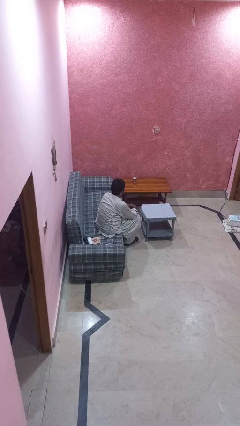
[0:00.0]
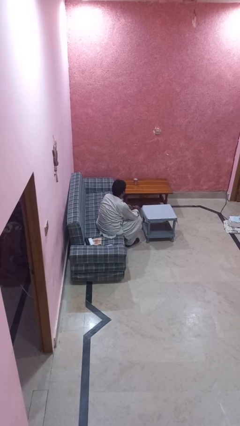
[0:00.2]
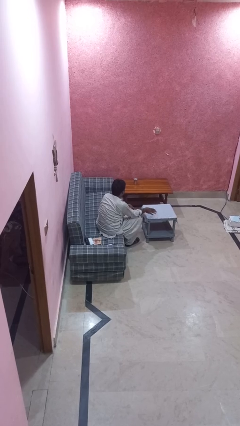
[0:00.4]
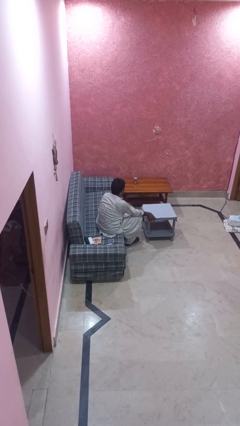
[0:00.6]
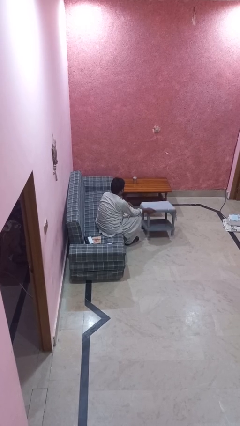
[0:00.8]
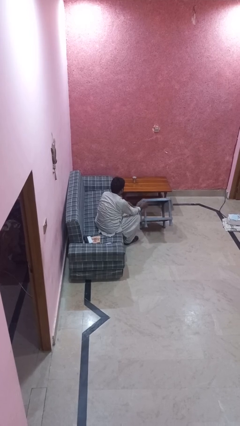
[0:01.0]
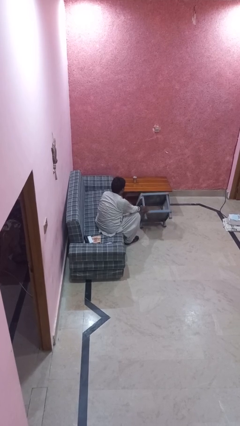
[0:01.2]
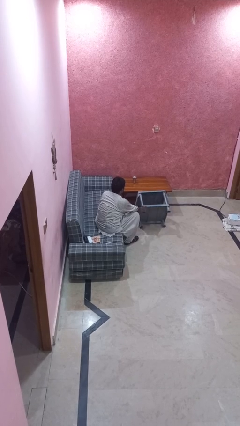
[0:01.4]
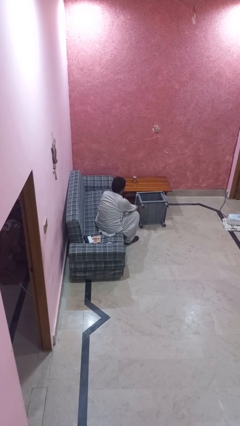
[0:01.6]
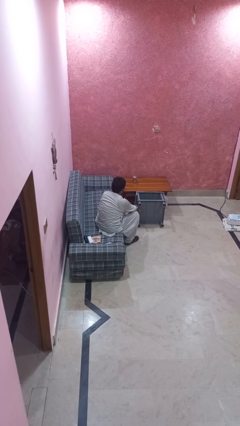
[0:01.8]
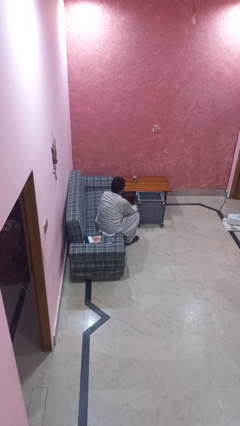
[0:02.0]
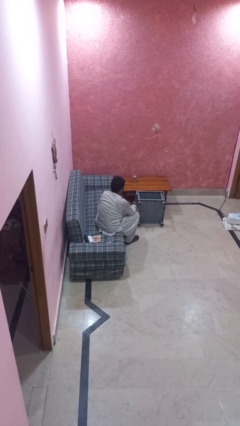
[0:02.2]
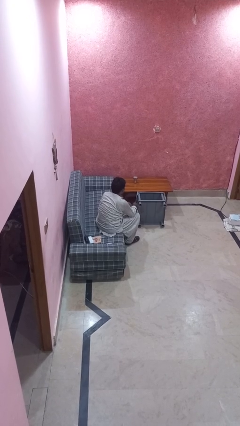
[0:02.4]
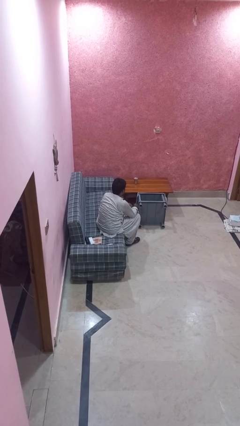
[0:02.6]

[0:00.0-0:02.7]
person knocks over furniture

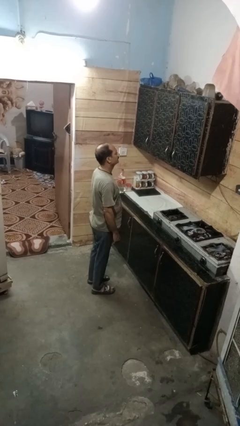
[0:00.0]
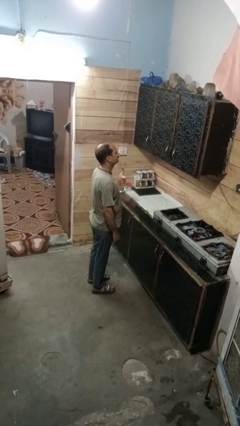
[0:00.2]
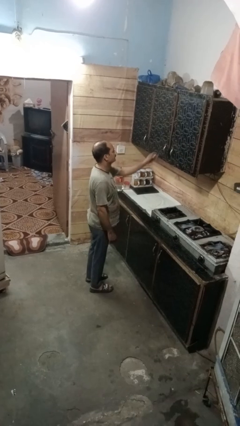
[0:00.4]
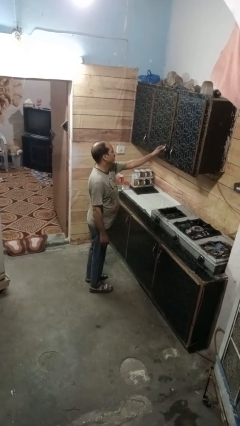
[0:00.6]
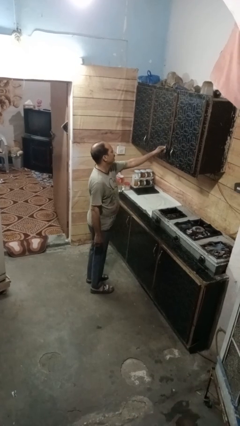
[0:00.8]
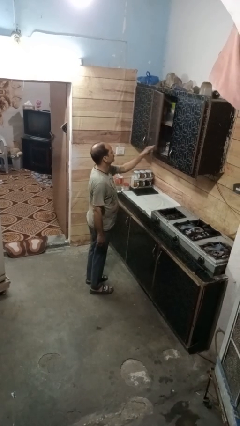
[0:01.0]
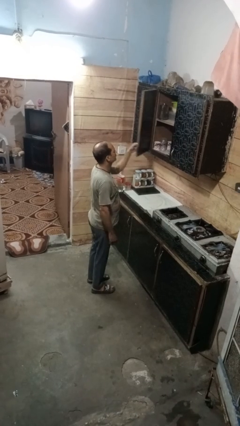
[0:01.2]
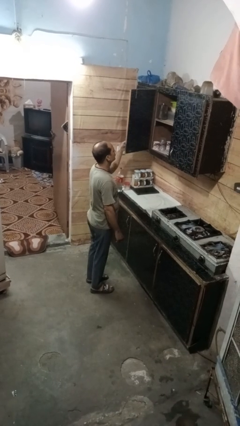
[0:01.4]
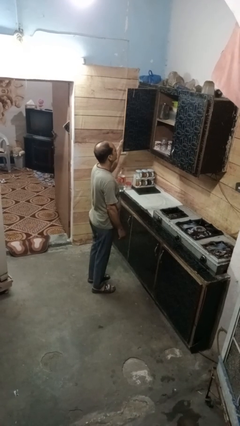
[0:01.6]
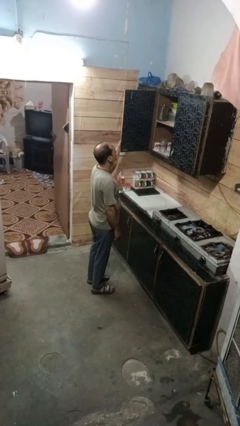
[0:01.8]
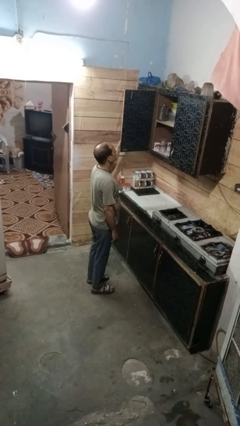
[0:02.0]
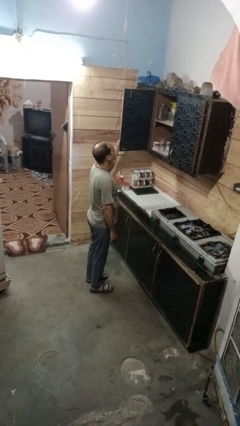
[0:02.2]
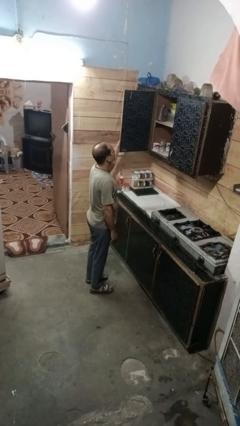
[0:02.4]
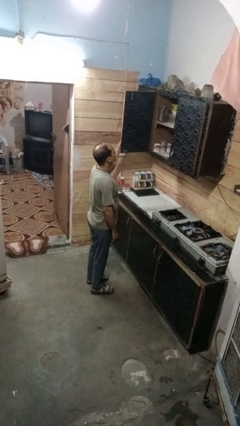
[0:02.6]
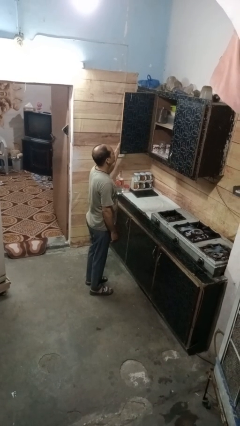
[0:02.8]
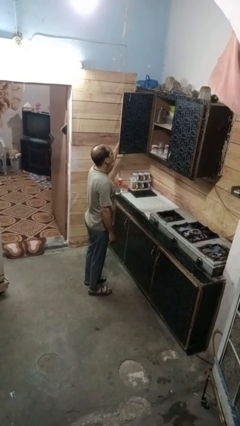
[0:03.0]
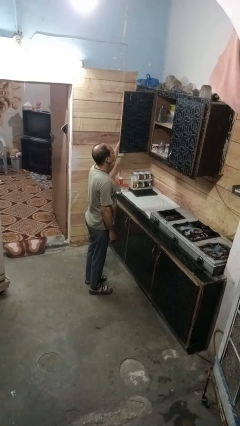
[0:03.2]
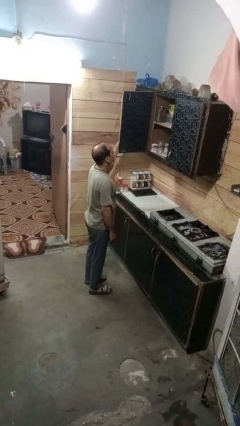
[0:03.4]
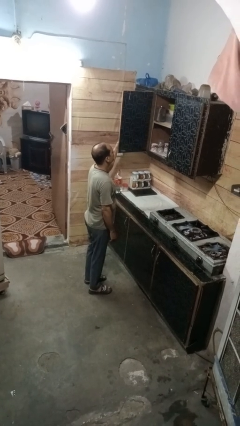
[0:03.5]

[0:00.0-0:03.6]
person opens cabinet

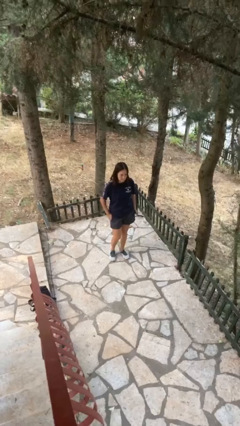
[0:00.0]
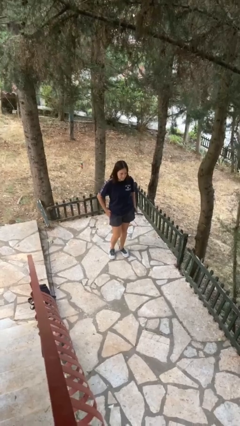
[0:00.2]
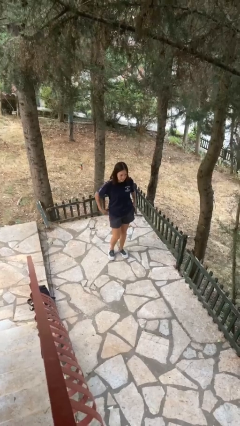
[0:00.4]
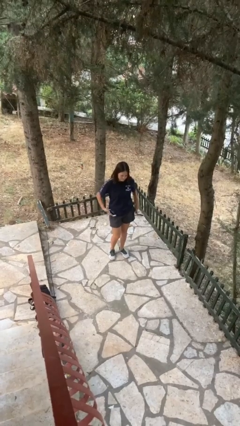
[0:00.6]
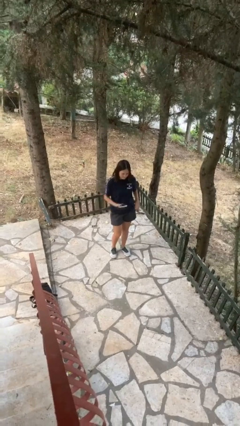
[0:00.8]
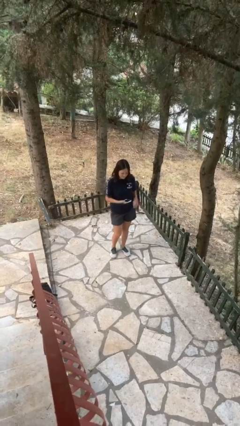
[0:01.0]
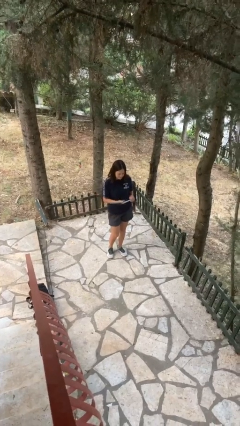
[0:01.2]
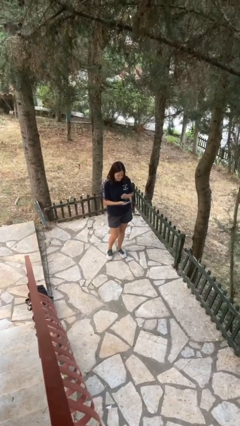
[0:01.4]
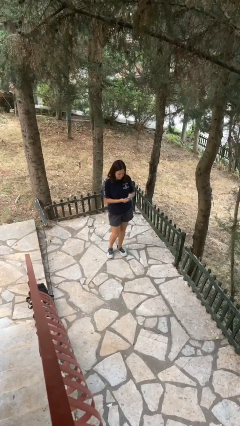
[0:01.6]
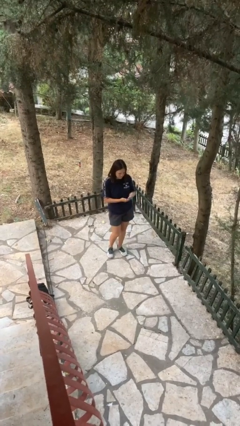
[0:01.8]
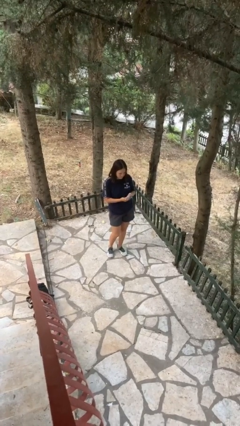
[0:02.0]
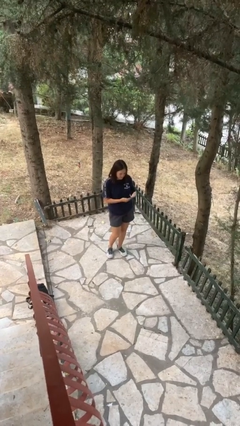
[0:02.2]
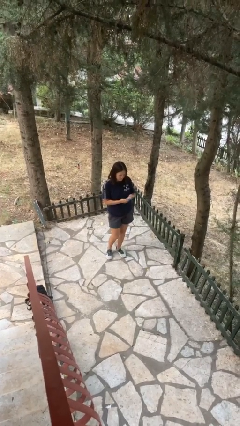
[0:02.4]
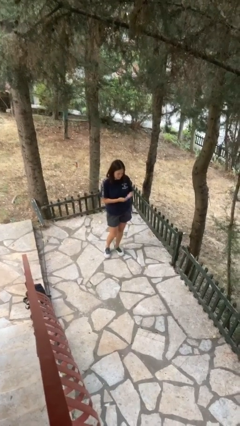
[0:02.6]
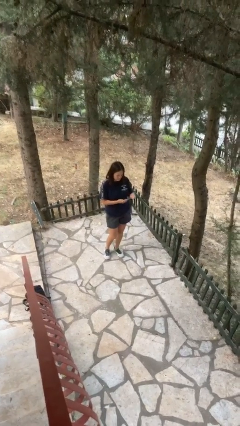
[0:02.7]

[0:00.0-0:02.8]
person takes phone from pocket

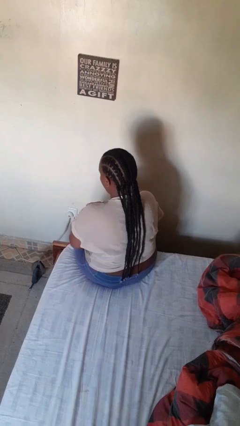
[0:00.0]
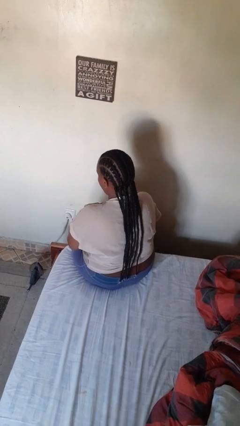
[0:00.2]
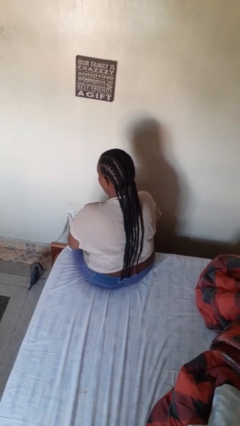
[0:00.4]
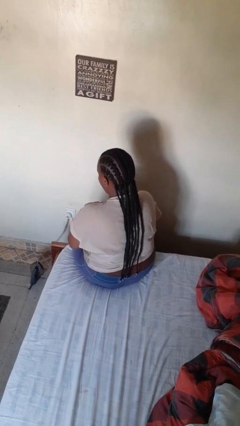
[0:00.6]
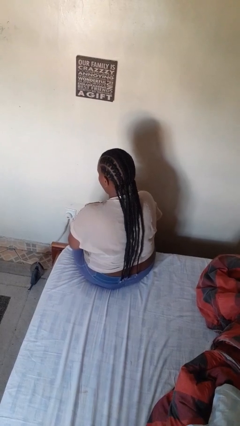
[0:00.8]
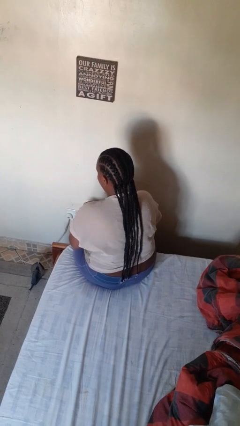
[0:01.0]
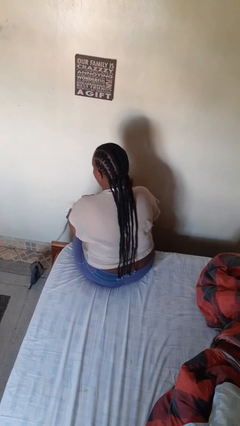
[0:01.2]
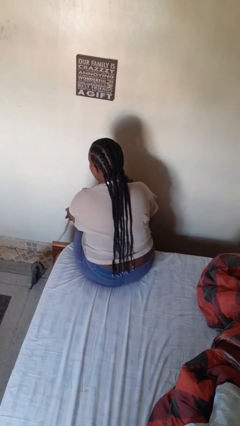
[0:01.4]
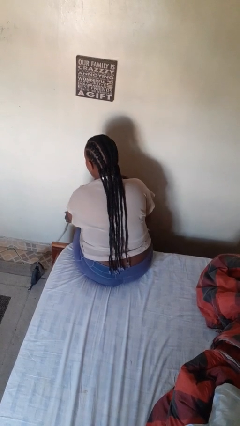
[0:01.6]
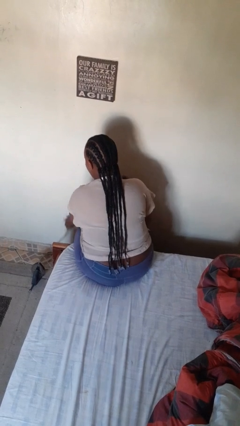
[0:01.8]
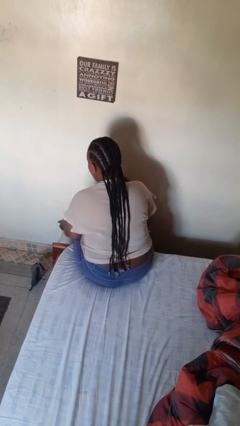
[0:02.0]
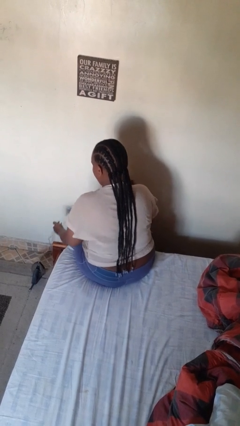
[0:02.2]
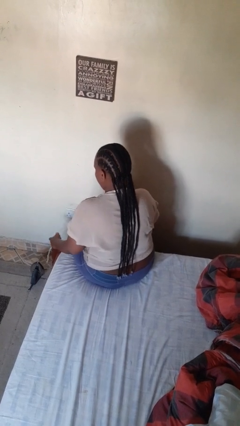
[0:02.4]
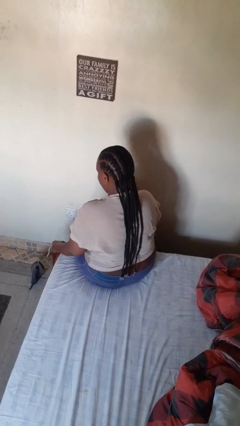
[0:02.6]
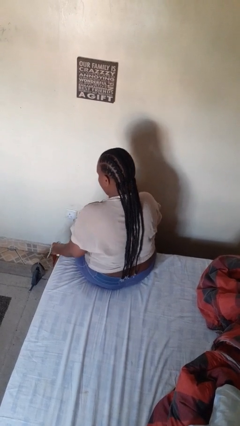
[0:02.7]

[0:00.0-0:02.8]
person unplugs from electrical socket

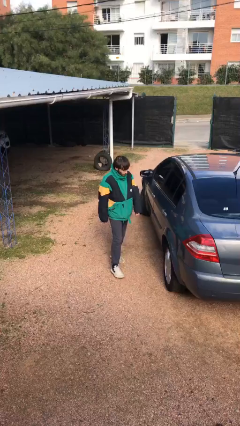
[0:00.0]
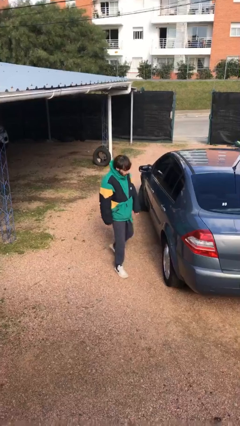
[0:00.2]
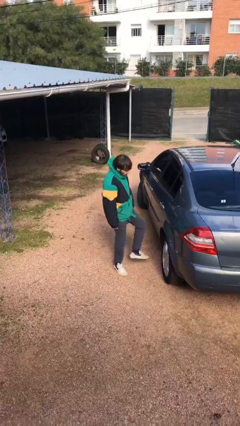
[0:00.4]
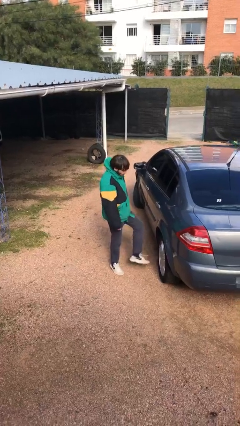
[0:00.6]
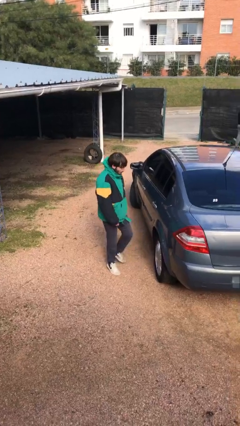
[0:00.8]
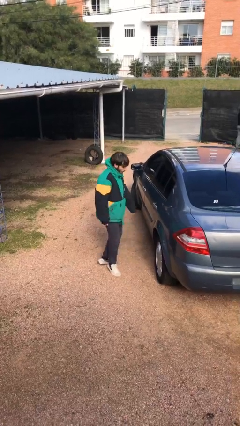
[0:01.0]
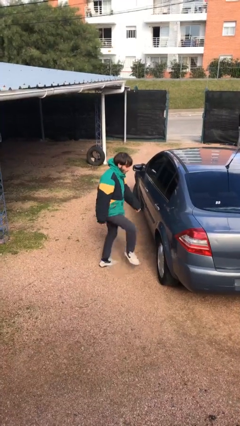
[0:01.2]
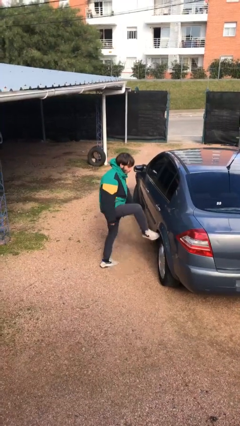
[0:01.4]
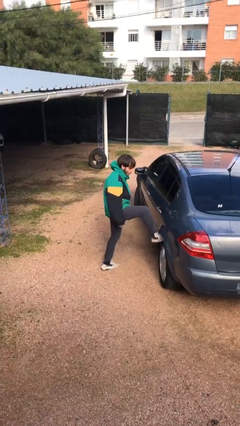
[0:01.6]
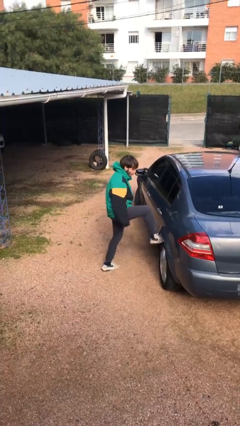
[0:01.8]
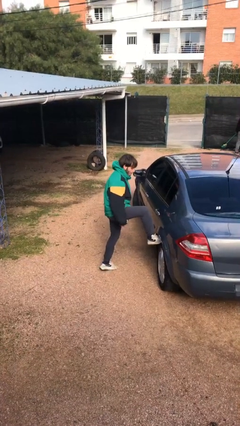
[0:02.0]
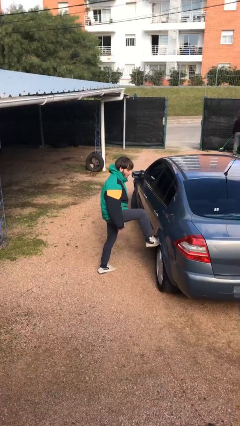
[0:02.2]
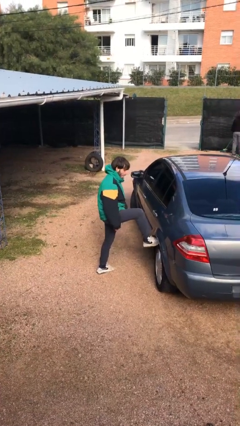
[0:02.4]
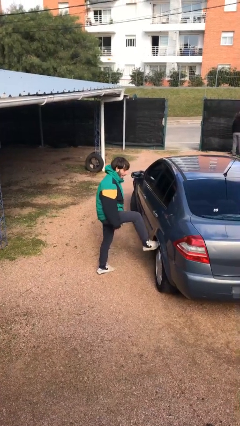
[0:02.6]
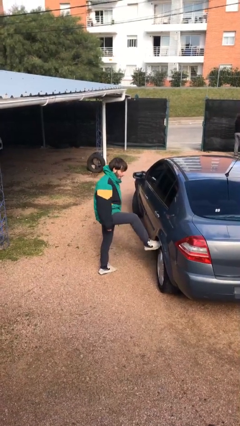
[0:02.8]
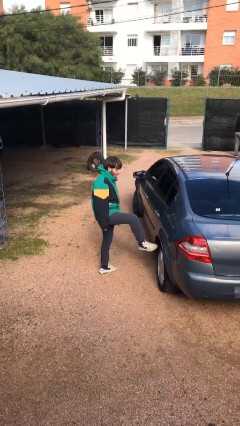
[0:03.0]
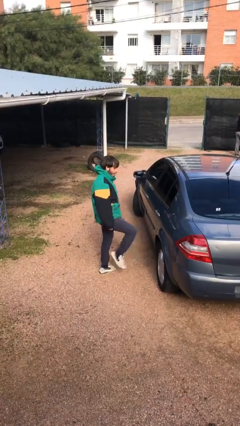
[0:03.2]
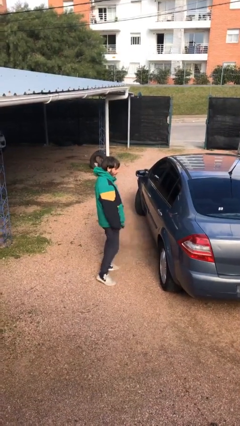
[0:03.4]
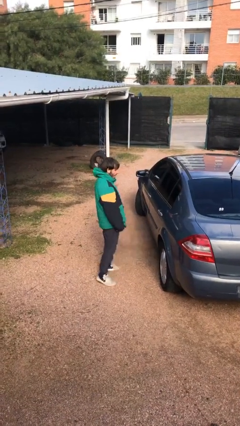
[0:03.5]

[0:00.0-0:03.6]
person kicks car tires

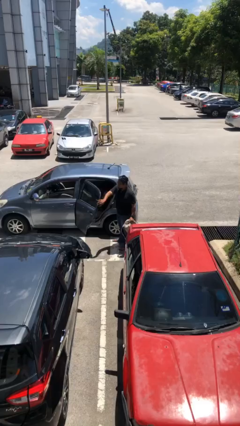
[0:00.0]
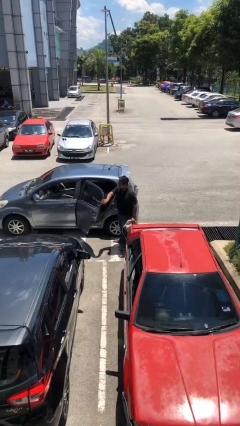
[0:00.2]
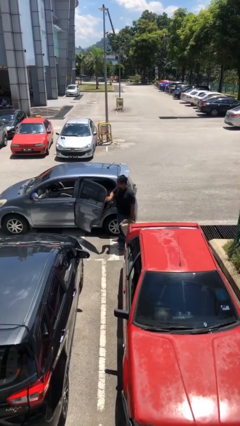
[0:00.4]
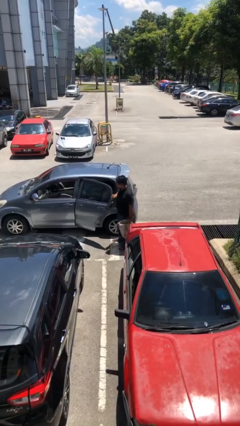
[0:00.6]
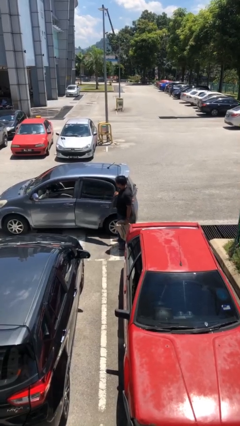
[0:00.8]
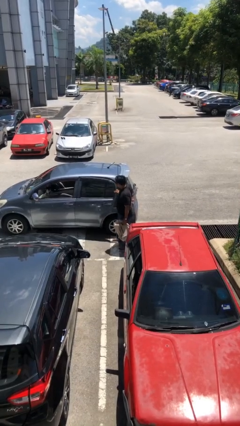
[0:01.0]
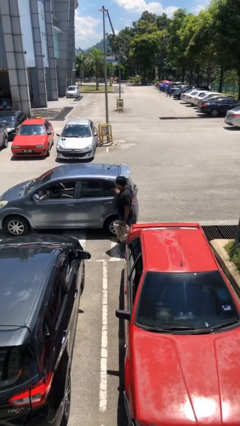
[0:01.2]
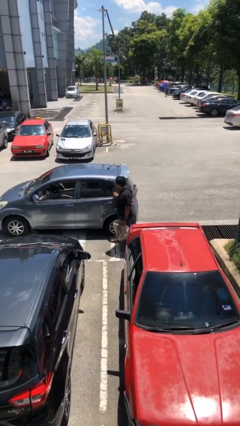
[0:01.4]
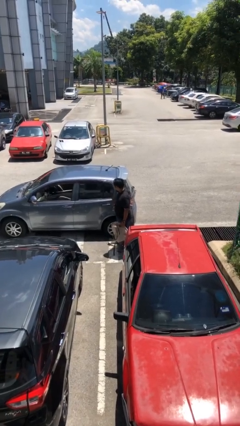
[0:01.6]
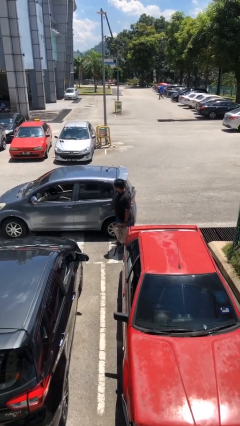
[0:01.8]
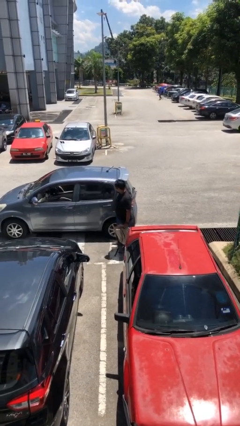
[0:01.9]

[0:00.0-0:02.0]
person closes car door

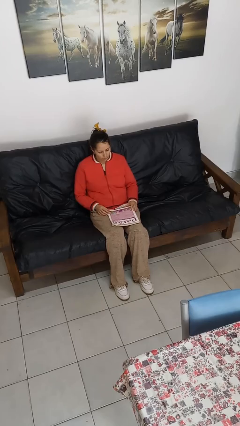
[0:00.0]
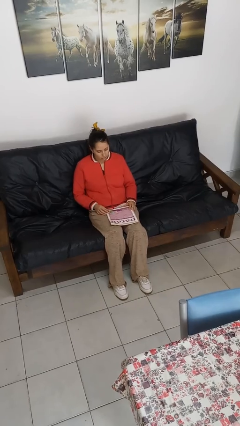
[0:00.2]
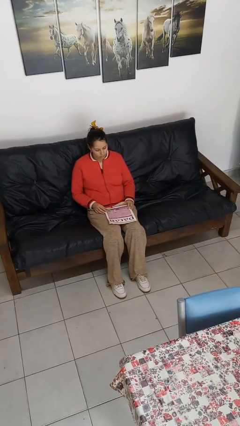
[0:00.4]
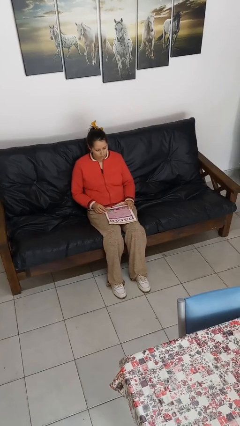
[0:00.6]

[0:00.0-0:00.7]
person reads magazine
